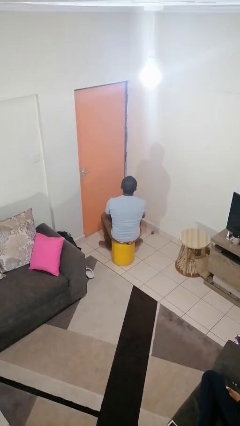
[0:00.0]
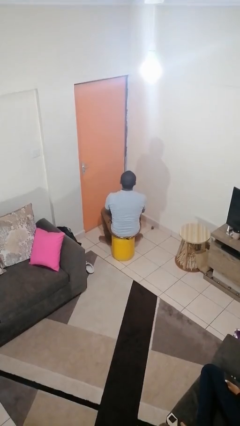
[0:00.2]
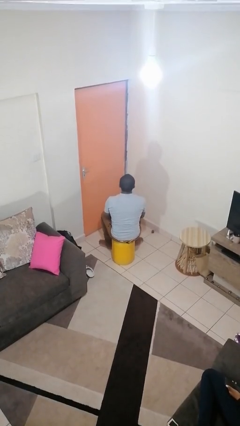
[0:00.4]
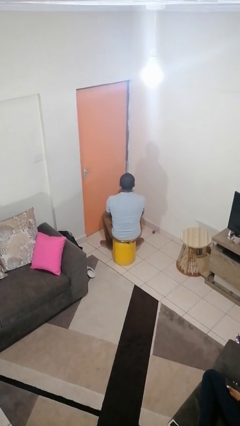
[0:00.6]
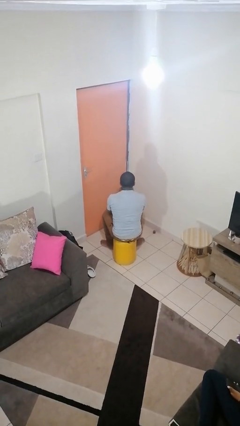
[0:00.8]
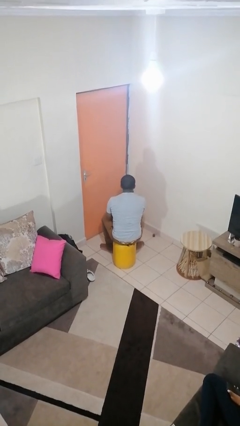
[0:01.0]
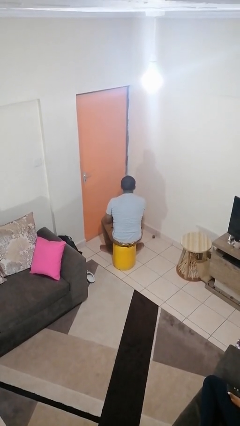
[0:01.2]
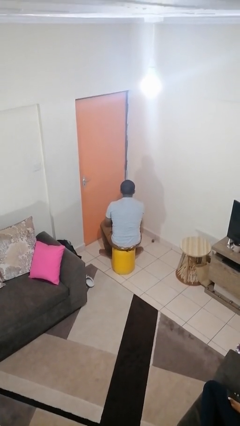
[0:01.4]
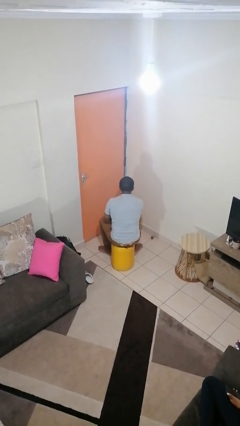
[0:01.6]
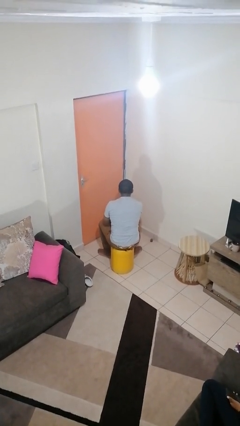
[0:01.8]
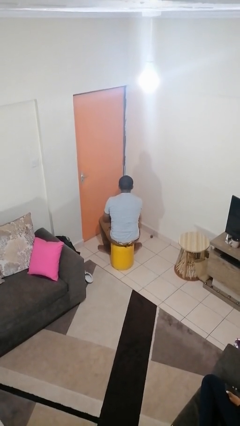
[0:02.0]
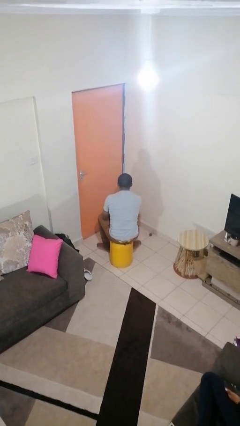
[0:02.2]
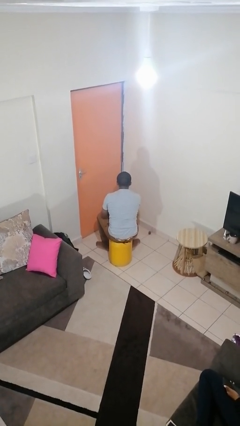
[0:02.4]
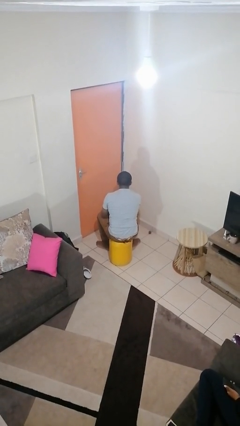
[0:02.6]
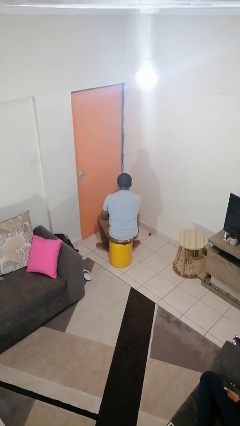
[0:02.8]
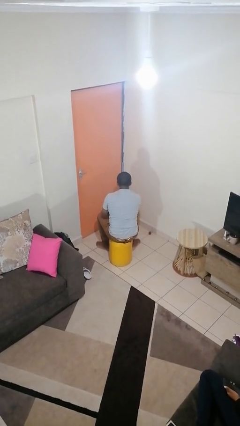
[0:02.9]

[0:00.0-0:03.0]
person gestures watch closely

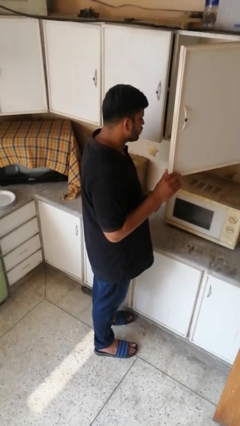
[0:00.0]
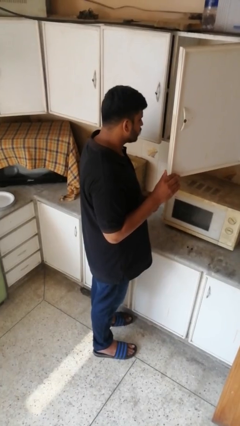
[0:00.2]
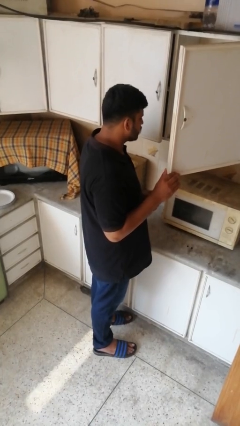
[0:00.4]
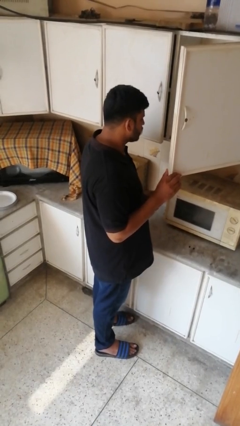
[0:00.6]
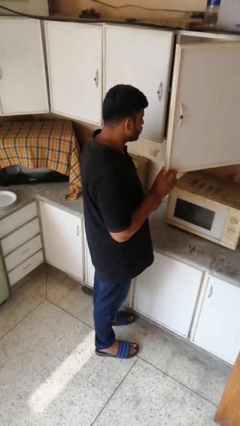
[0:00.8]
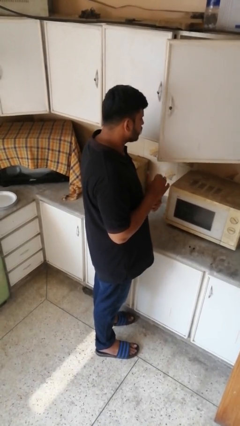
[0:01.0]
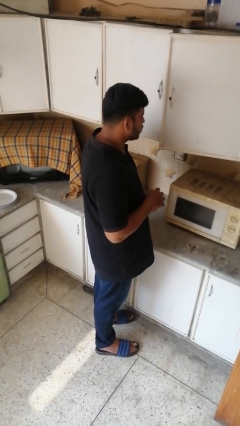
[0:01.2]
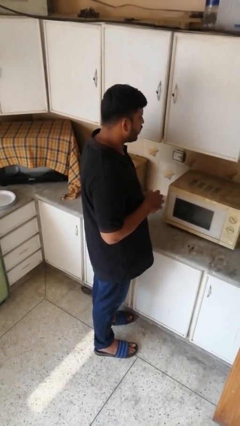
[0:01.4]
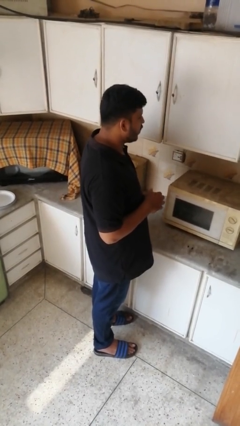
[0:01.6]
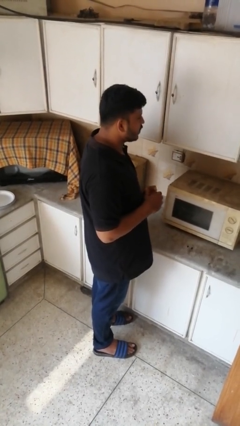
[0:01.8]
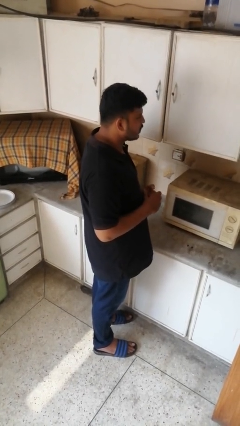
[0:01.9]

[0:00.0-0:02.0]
person closes cabinet

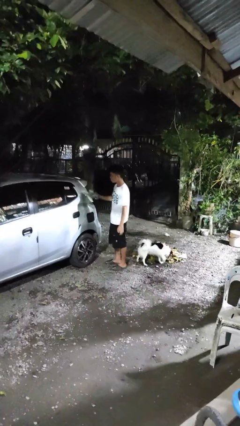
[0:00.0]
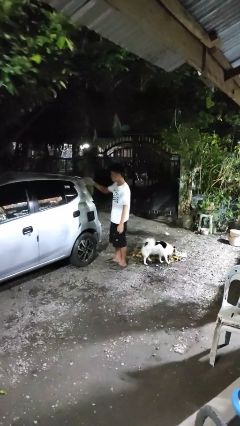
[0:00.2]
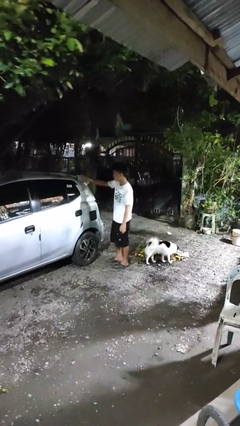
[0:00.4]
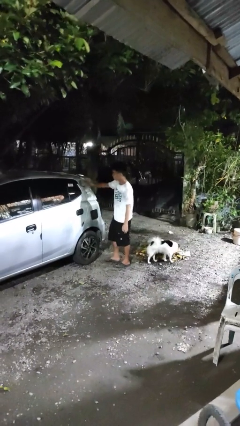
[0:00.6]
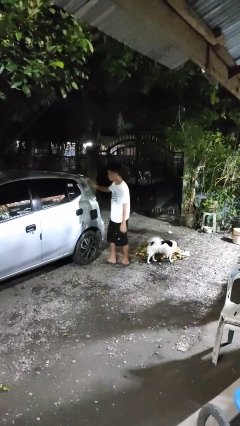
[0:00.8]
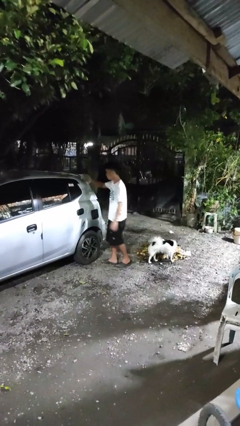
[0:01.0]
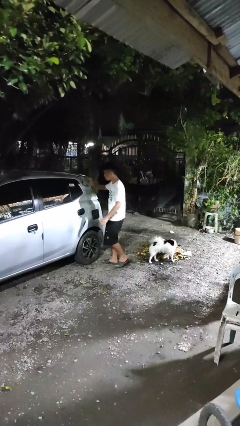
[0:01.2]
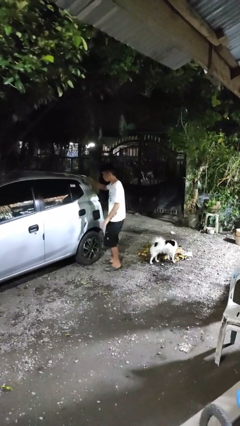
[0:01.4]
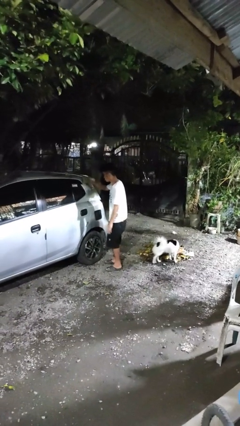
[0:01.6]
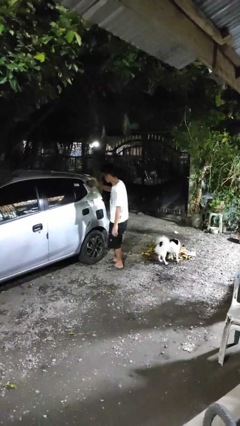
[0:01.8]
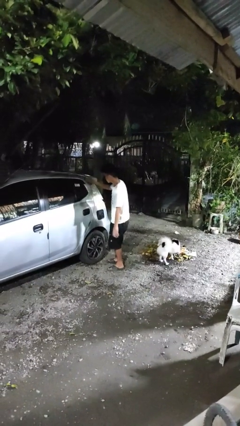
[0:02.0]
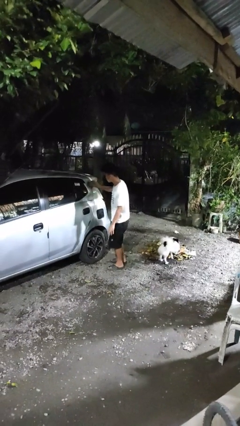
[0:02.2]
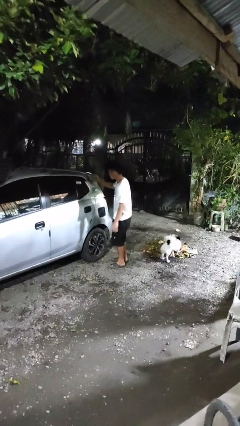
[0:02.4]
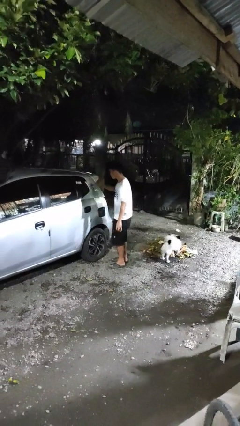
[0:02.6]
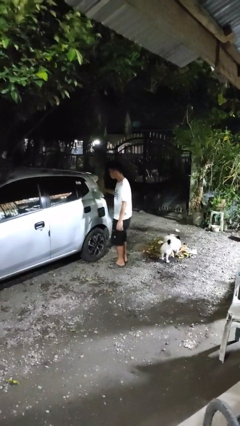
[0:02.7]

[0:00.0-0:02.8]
person polishes car with rag

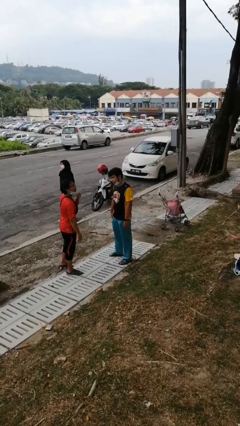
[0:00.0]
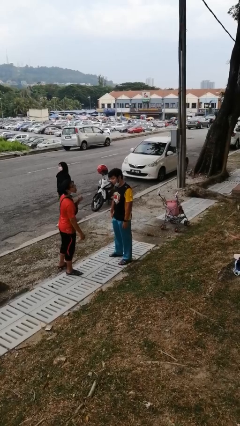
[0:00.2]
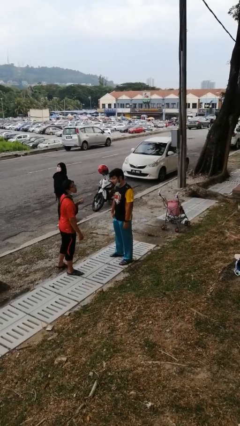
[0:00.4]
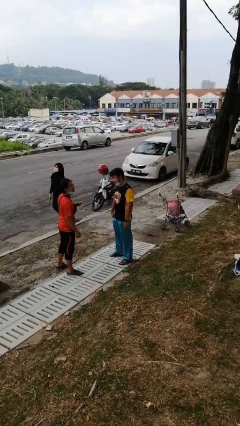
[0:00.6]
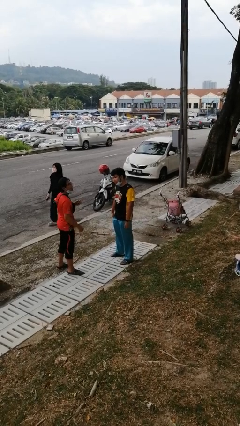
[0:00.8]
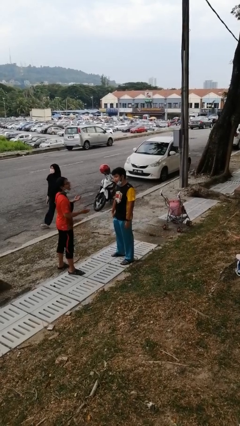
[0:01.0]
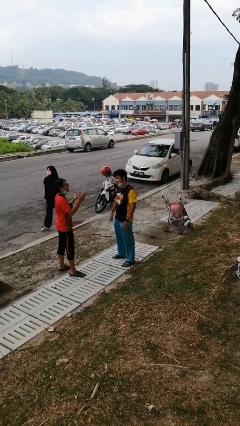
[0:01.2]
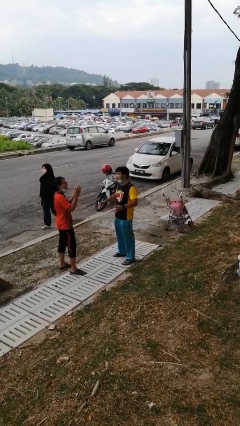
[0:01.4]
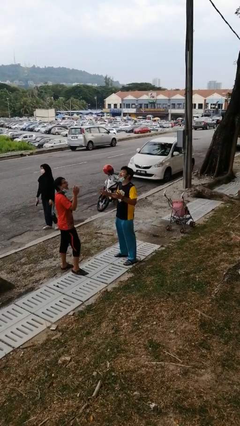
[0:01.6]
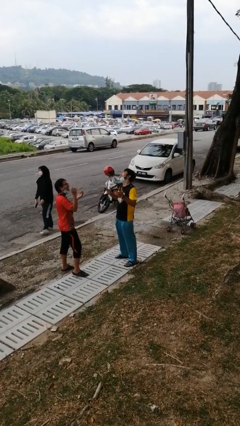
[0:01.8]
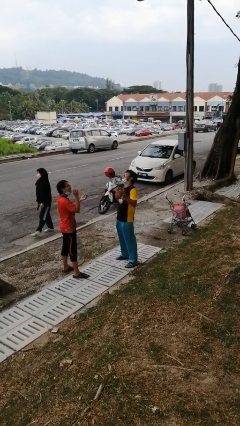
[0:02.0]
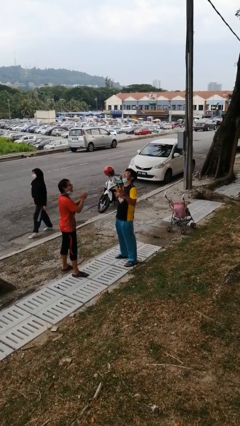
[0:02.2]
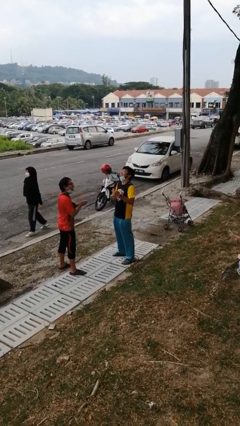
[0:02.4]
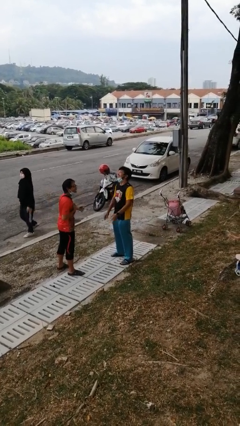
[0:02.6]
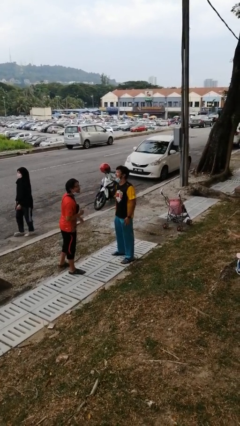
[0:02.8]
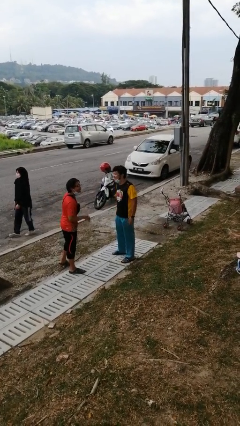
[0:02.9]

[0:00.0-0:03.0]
person laughs with person

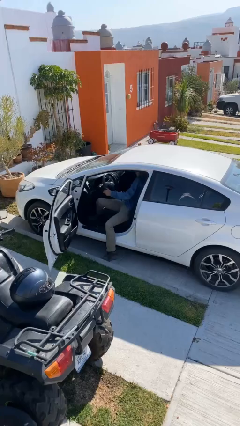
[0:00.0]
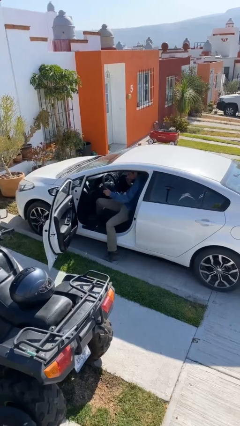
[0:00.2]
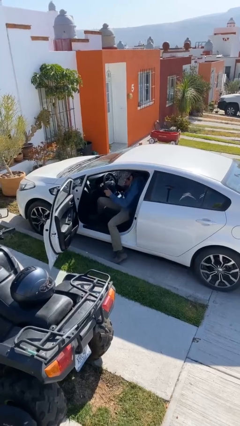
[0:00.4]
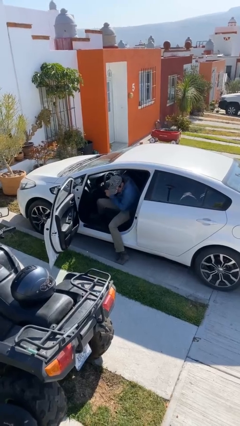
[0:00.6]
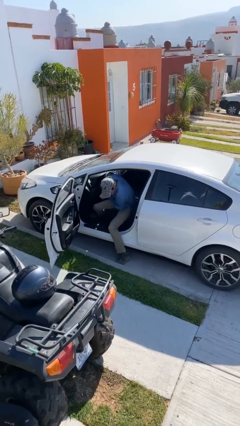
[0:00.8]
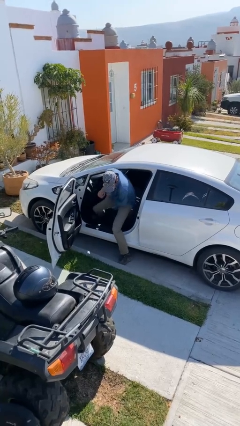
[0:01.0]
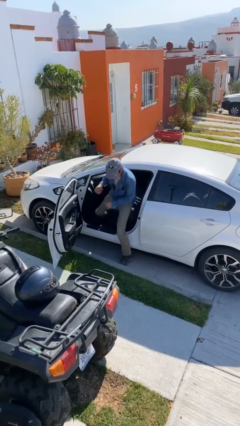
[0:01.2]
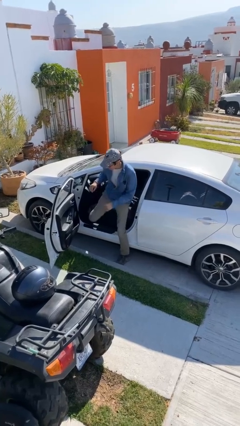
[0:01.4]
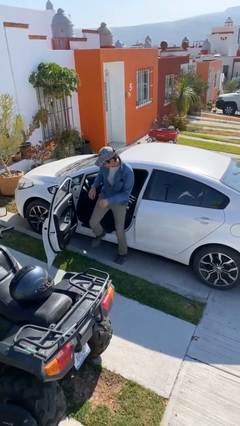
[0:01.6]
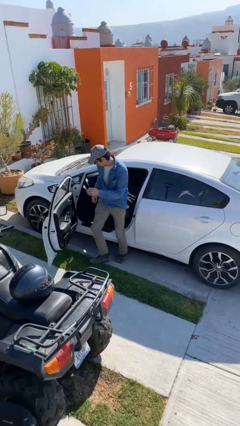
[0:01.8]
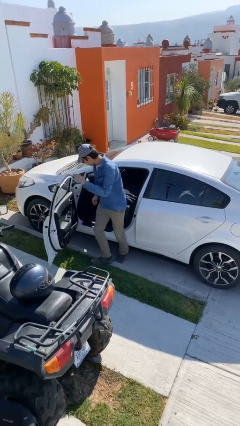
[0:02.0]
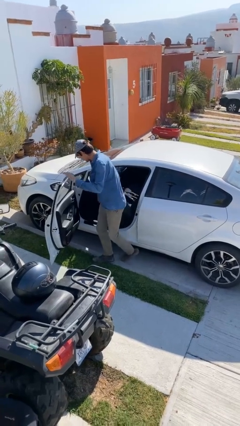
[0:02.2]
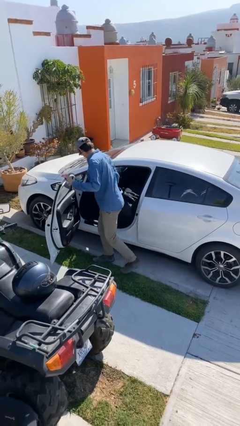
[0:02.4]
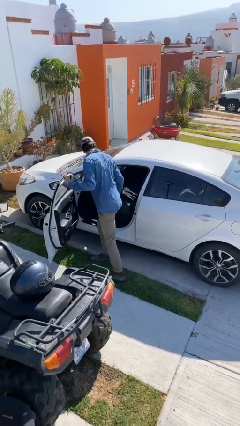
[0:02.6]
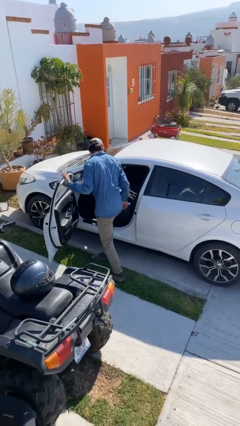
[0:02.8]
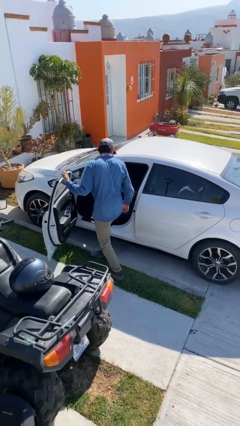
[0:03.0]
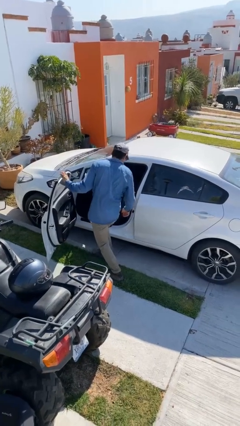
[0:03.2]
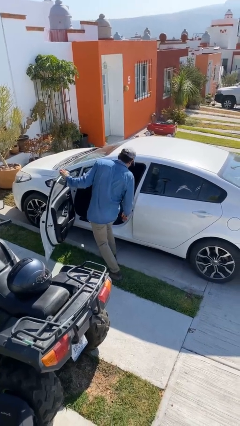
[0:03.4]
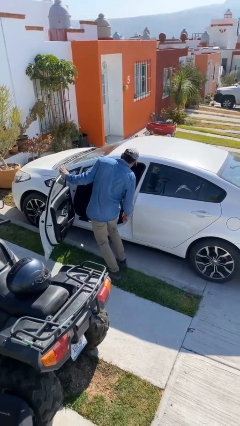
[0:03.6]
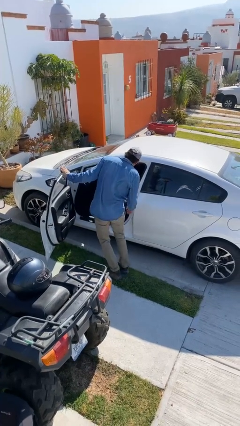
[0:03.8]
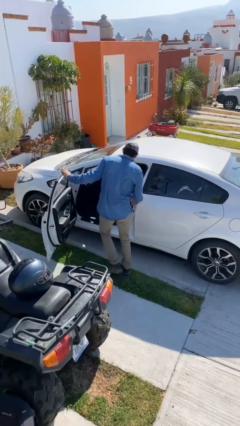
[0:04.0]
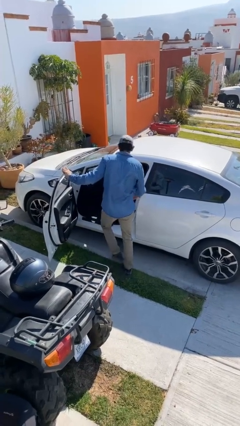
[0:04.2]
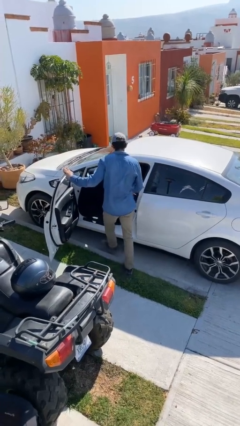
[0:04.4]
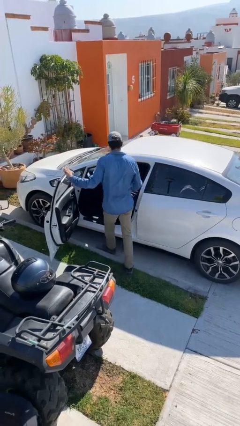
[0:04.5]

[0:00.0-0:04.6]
person exits car

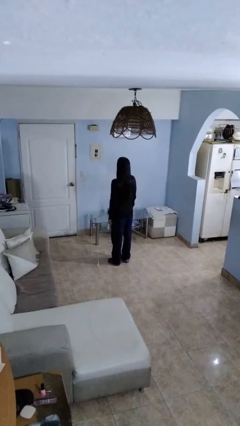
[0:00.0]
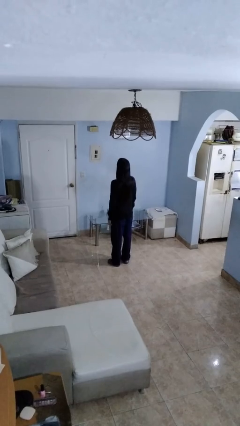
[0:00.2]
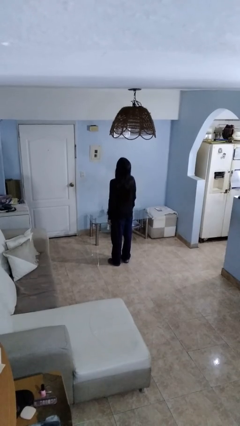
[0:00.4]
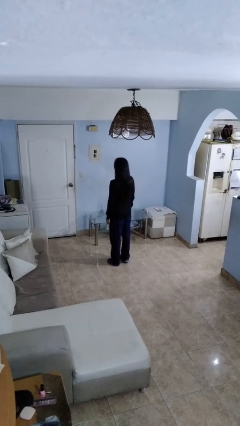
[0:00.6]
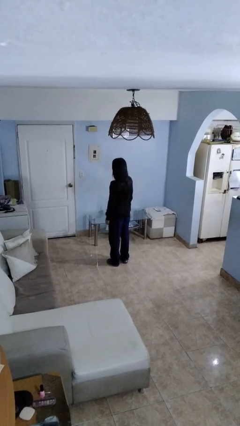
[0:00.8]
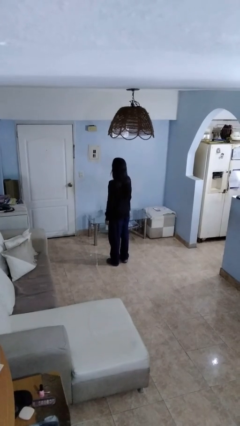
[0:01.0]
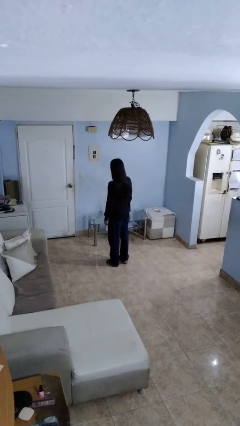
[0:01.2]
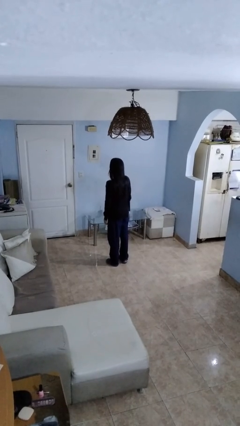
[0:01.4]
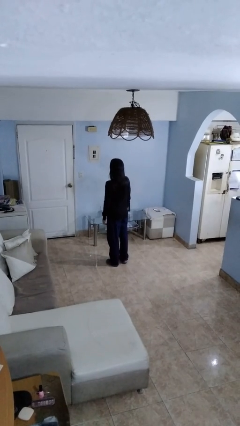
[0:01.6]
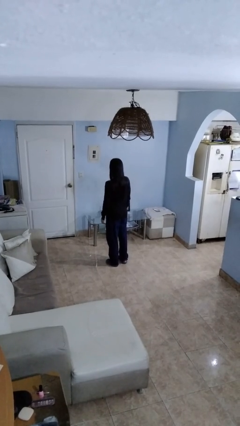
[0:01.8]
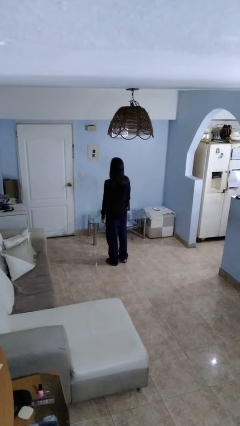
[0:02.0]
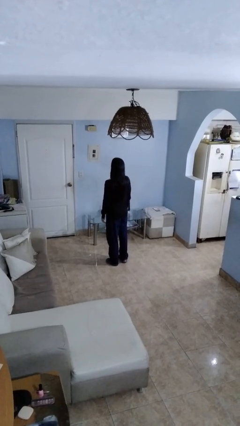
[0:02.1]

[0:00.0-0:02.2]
person nods head
